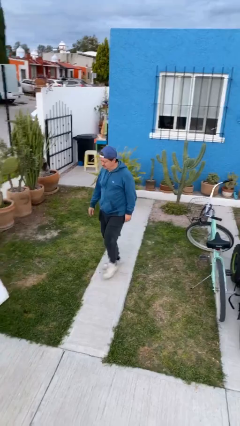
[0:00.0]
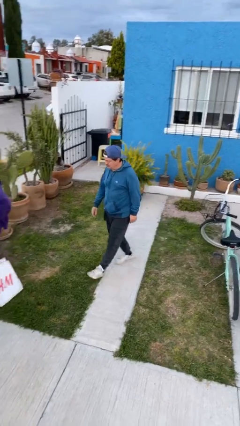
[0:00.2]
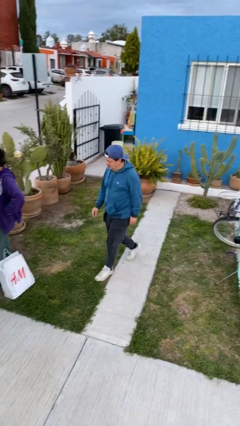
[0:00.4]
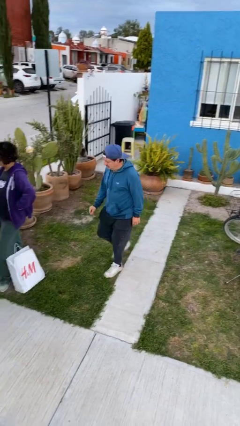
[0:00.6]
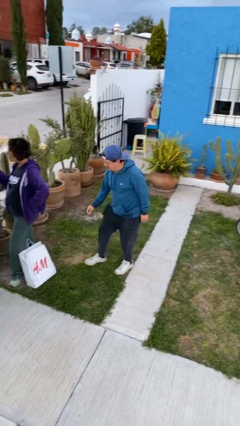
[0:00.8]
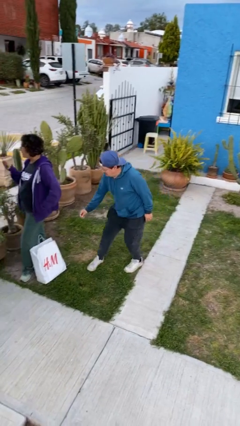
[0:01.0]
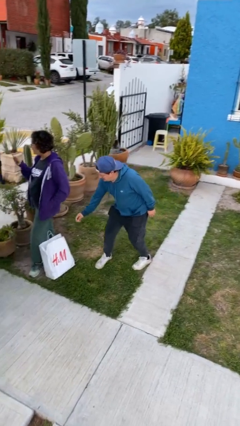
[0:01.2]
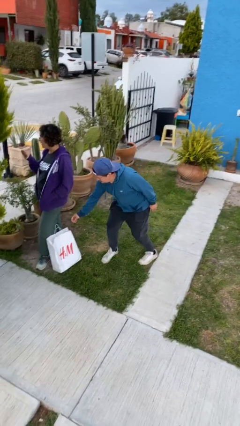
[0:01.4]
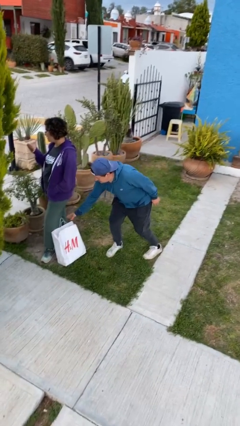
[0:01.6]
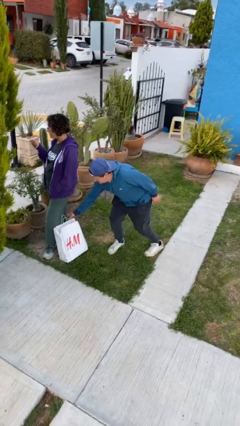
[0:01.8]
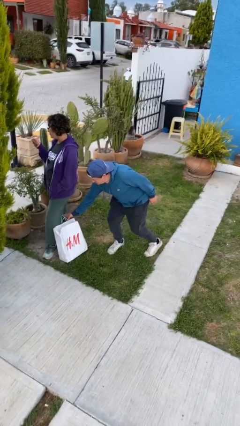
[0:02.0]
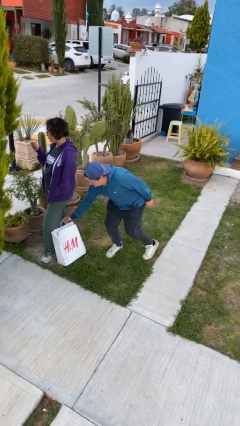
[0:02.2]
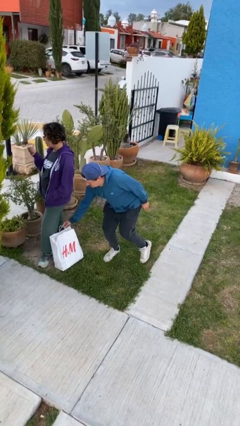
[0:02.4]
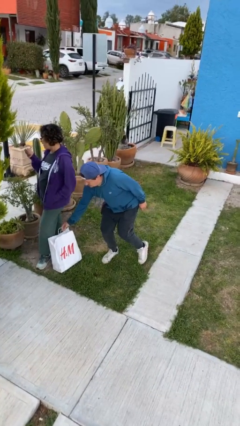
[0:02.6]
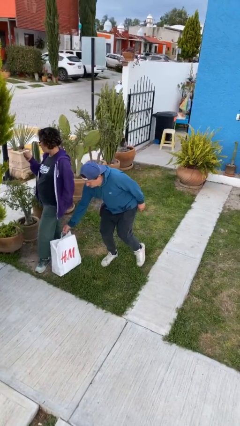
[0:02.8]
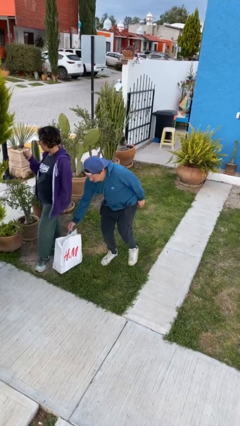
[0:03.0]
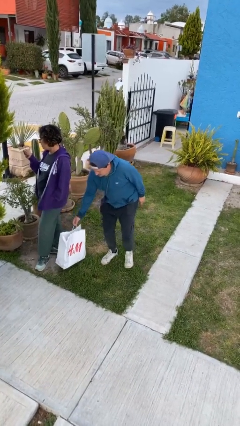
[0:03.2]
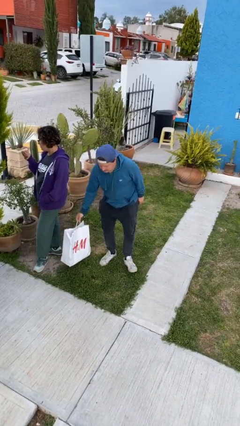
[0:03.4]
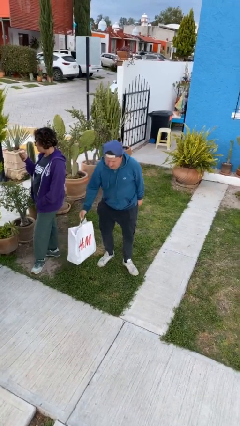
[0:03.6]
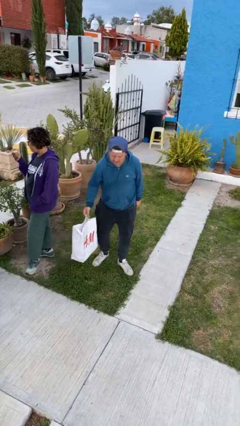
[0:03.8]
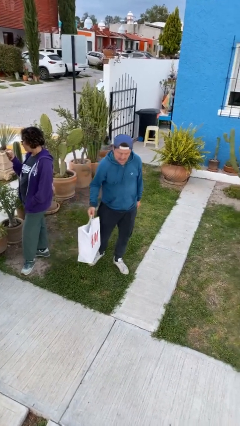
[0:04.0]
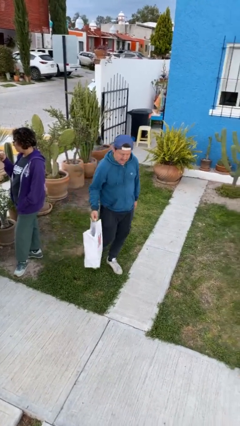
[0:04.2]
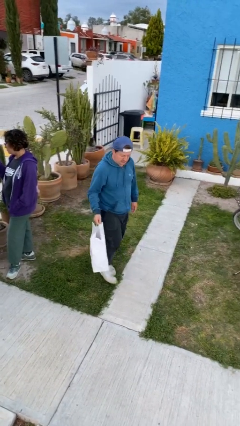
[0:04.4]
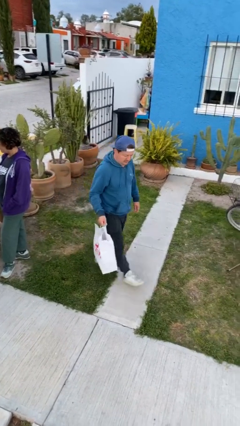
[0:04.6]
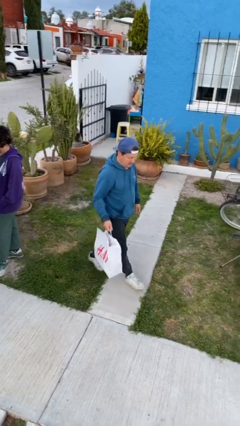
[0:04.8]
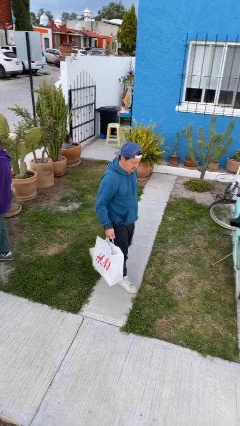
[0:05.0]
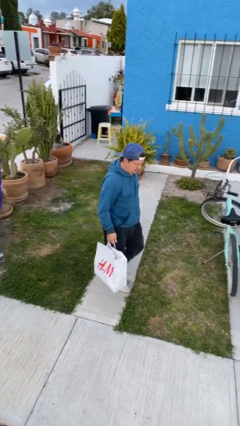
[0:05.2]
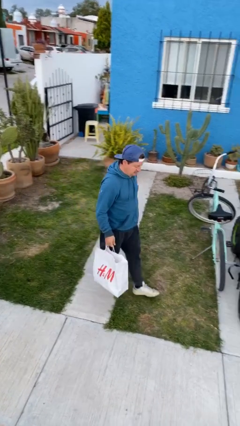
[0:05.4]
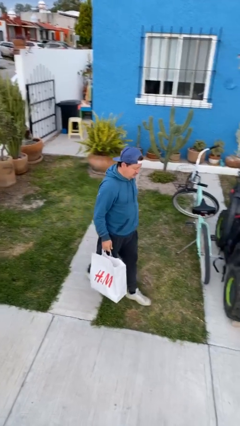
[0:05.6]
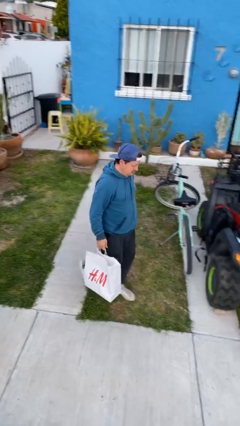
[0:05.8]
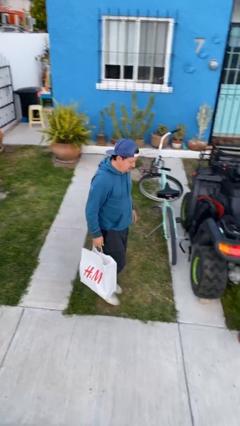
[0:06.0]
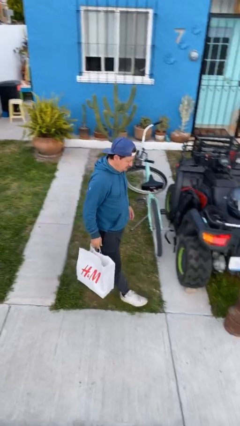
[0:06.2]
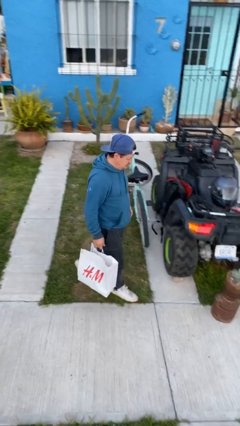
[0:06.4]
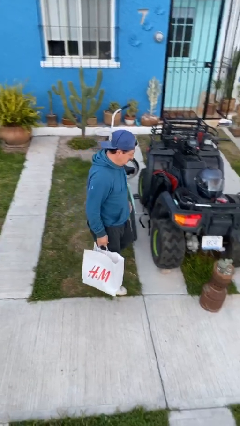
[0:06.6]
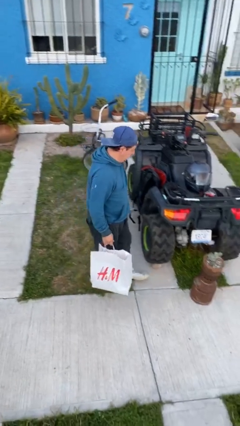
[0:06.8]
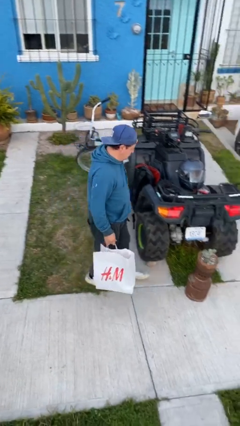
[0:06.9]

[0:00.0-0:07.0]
person steals object from person

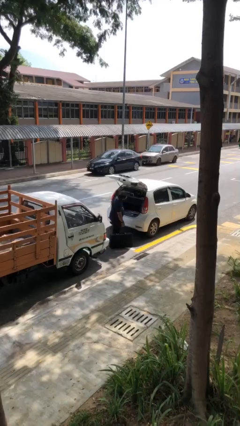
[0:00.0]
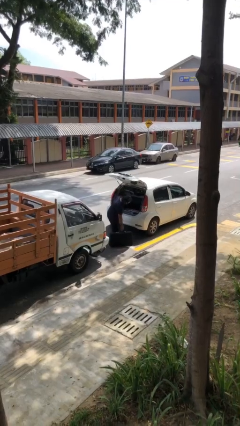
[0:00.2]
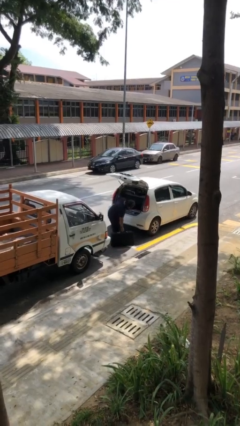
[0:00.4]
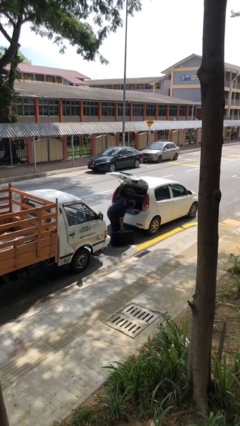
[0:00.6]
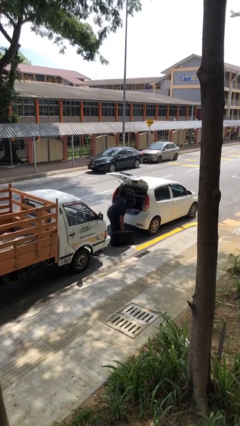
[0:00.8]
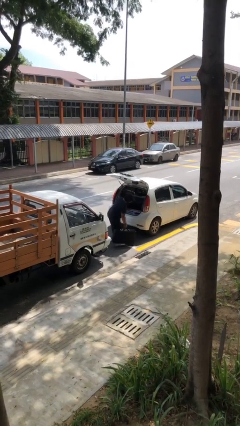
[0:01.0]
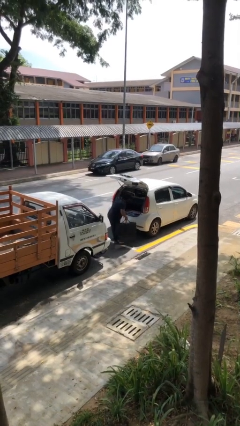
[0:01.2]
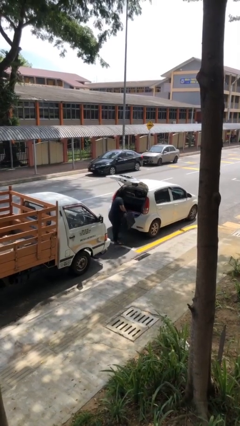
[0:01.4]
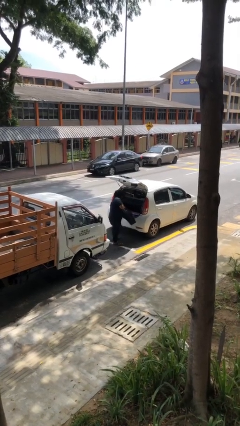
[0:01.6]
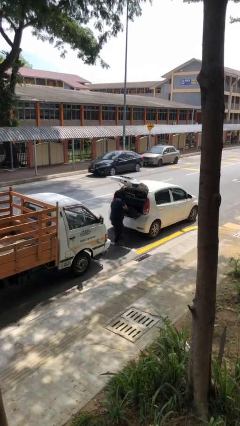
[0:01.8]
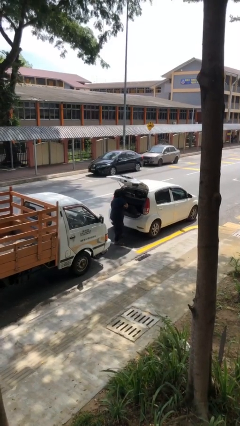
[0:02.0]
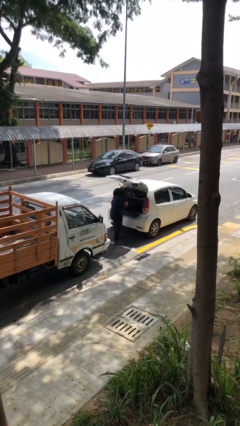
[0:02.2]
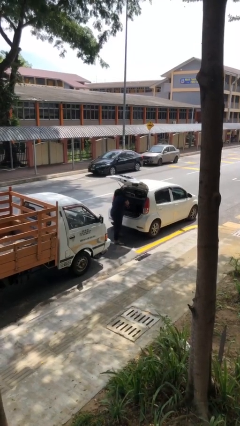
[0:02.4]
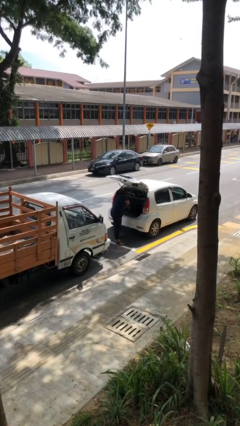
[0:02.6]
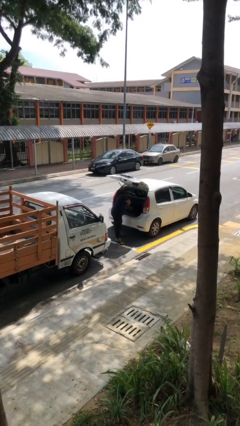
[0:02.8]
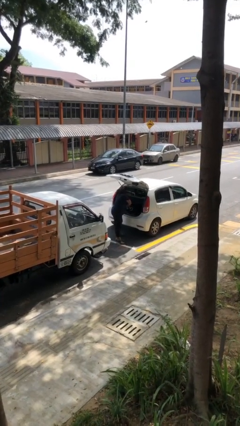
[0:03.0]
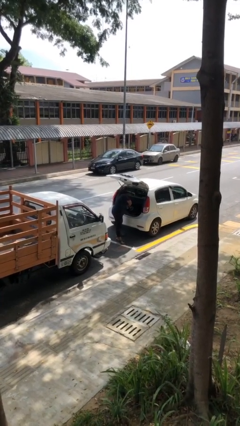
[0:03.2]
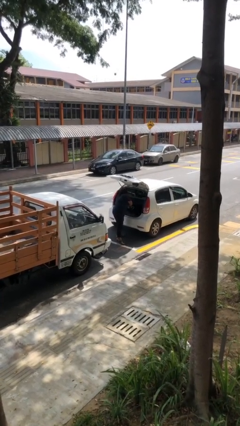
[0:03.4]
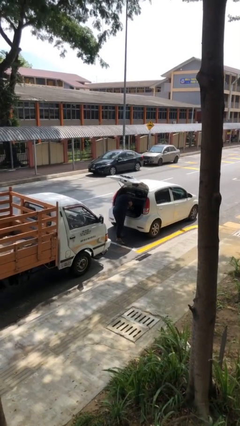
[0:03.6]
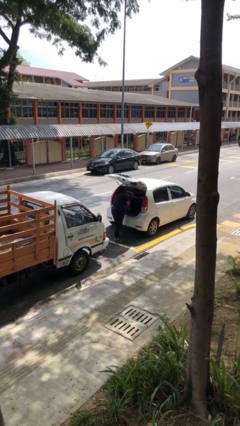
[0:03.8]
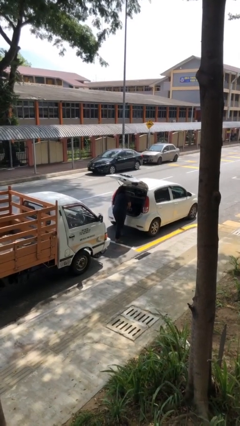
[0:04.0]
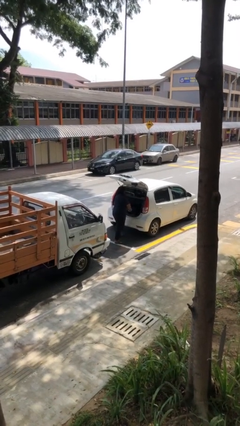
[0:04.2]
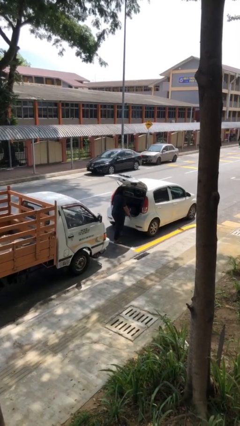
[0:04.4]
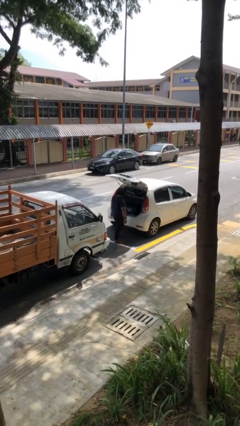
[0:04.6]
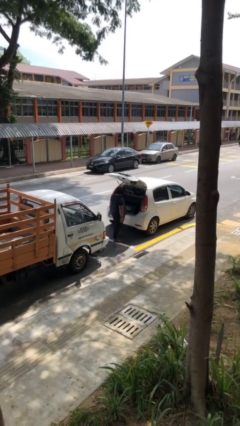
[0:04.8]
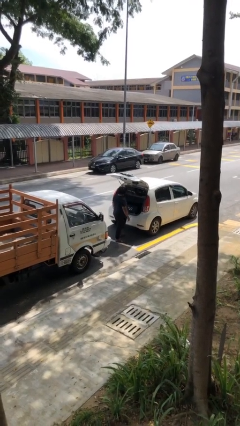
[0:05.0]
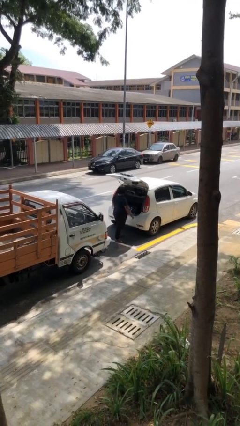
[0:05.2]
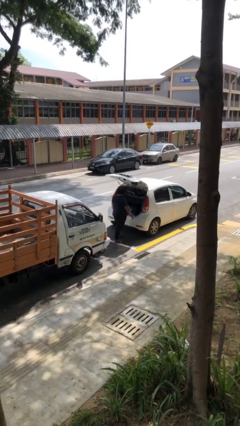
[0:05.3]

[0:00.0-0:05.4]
person loads car

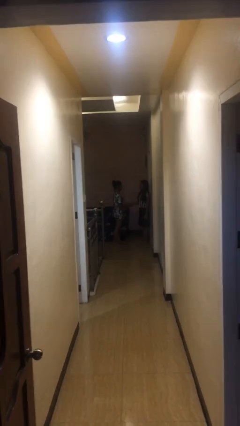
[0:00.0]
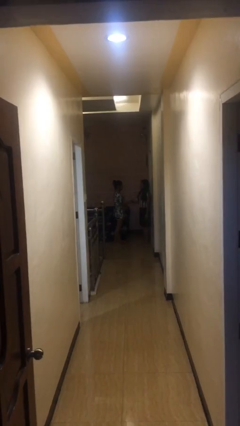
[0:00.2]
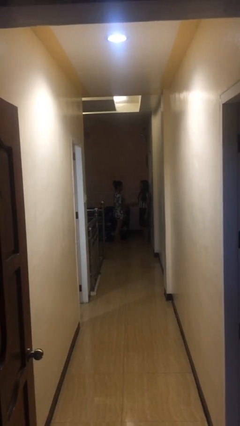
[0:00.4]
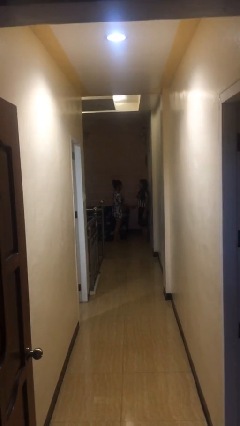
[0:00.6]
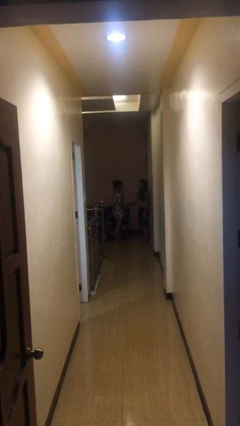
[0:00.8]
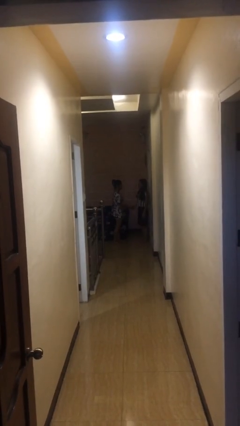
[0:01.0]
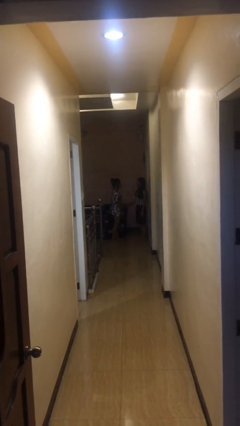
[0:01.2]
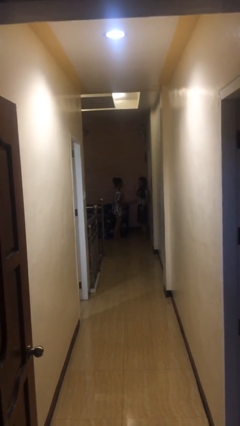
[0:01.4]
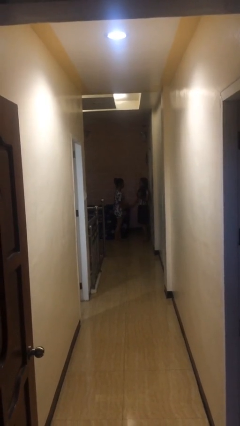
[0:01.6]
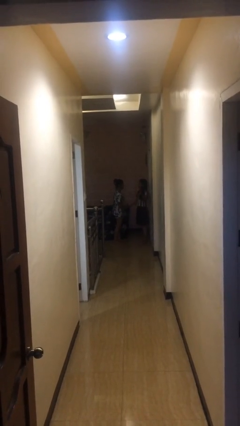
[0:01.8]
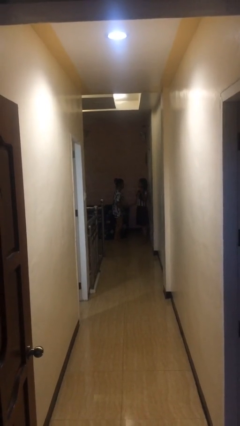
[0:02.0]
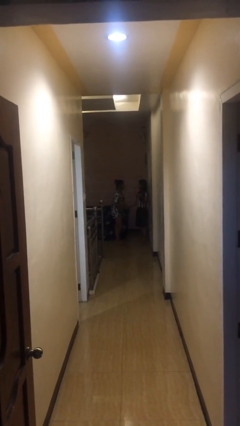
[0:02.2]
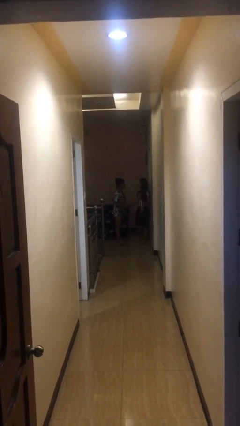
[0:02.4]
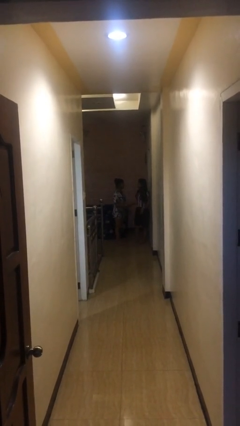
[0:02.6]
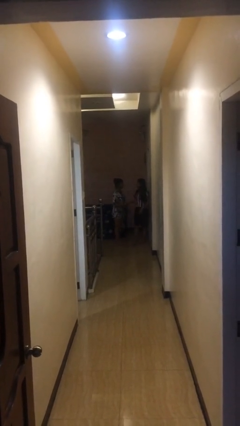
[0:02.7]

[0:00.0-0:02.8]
person shakes hand

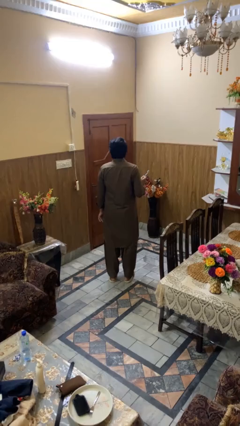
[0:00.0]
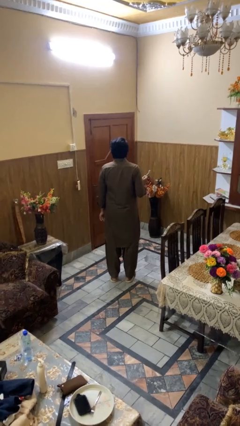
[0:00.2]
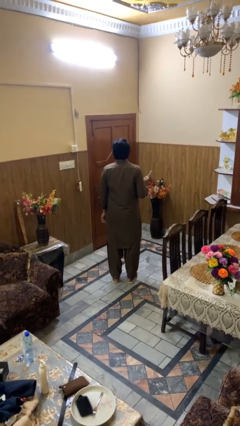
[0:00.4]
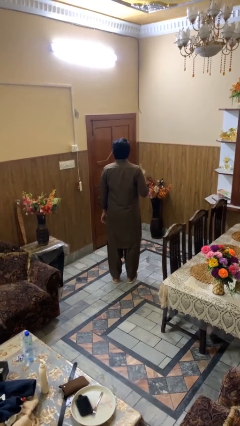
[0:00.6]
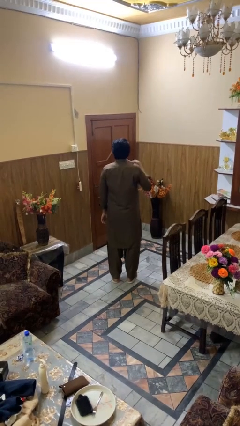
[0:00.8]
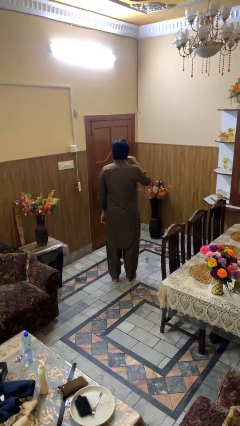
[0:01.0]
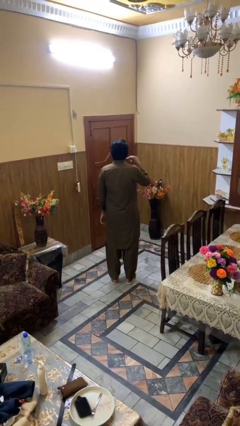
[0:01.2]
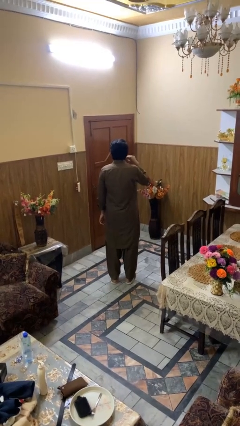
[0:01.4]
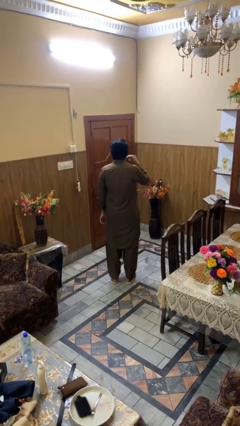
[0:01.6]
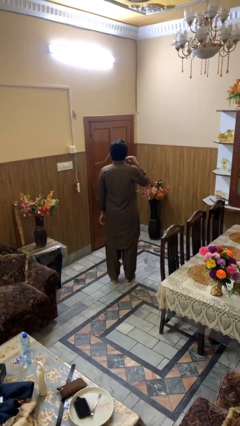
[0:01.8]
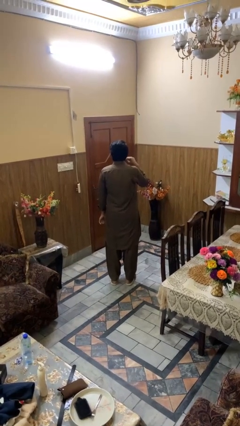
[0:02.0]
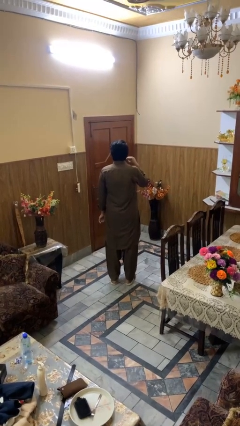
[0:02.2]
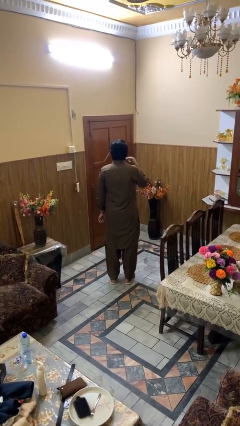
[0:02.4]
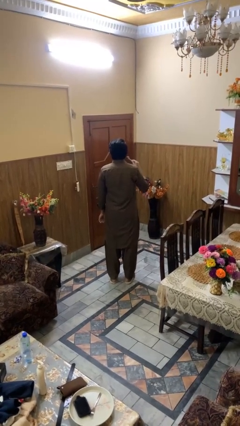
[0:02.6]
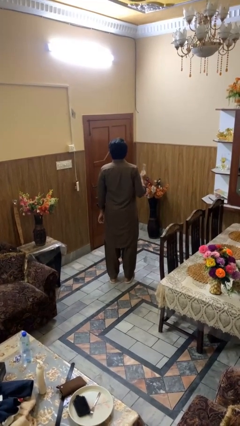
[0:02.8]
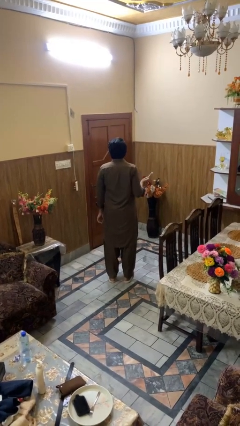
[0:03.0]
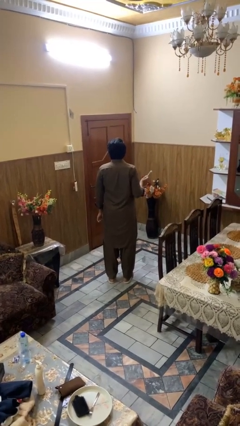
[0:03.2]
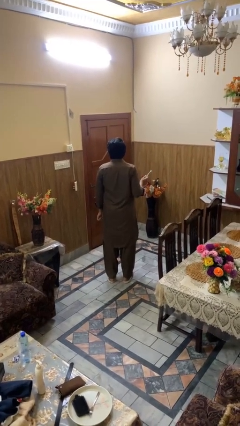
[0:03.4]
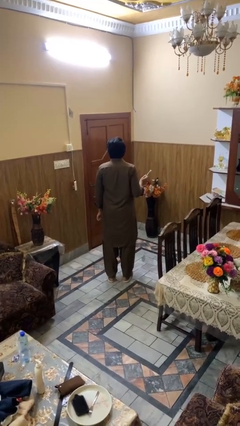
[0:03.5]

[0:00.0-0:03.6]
person brushes teeth
